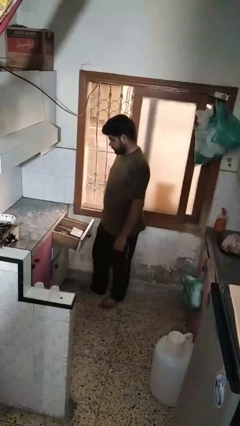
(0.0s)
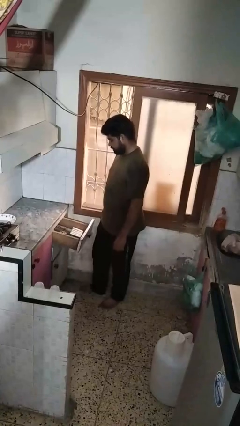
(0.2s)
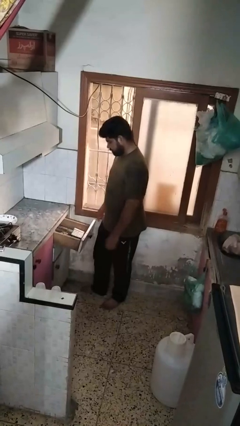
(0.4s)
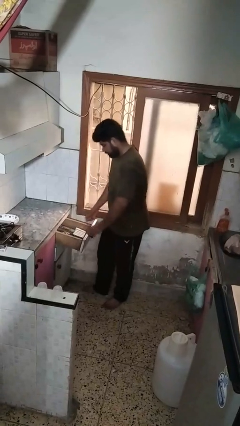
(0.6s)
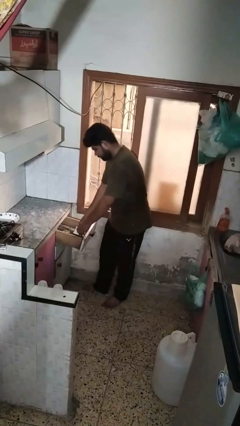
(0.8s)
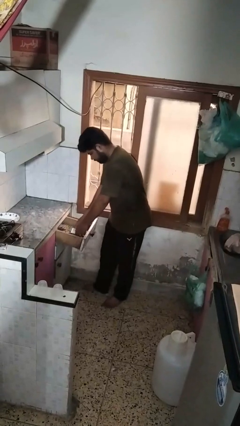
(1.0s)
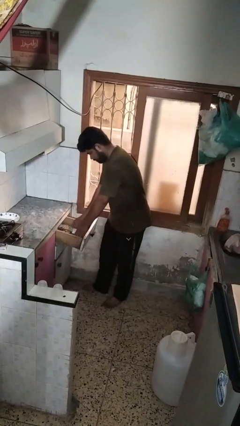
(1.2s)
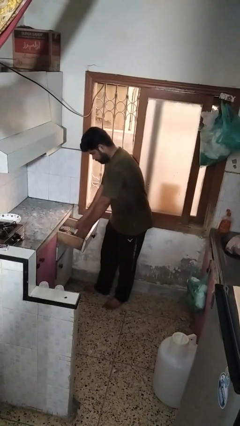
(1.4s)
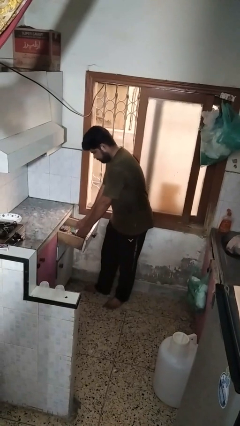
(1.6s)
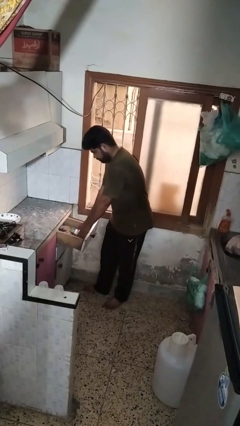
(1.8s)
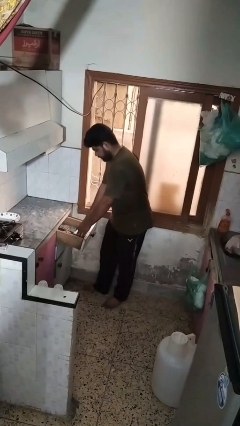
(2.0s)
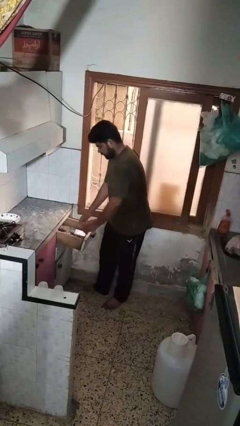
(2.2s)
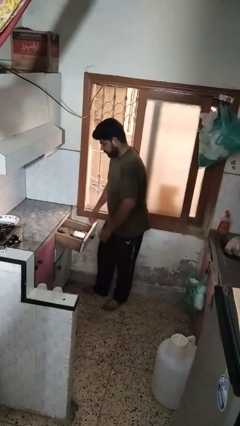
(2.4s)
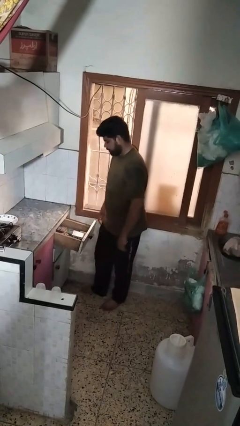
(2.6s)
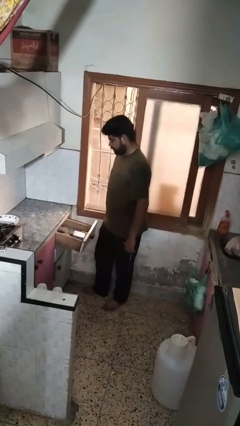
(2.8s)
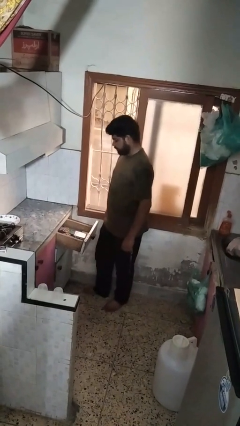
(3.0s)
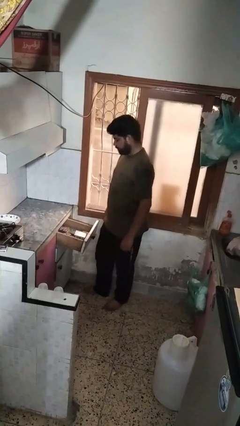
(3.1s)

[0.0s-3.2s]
person searches in kitchen drawer

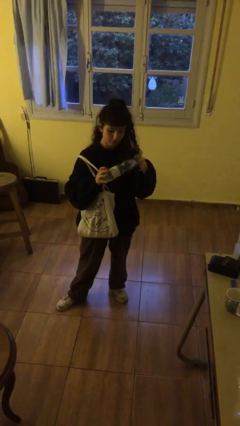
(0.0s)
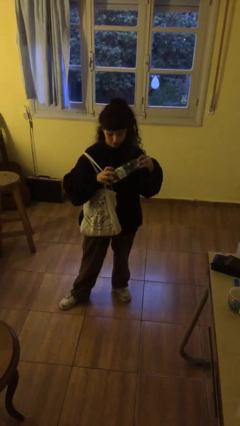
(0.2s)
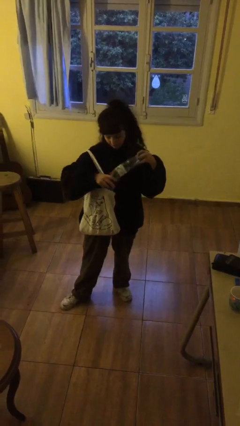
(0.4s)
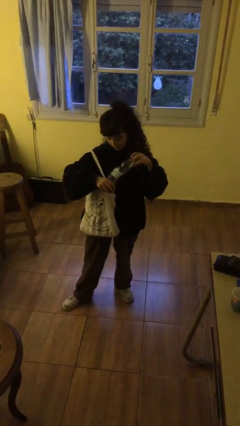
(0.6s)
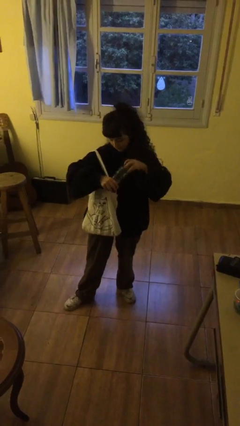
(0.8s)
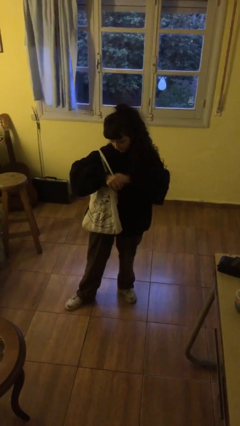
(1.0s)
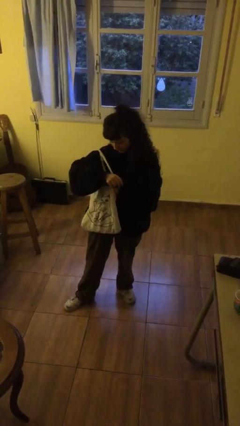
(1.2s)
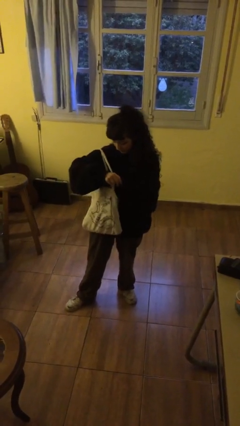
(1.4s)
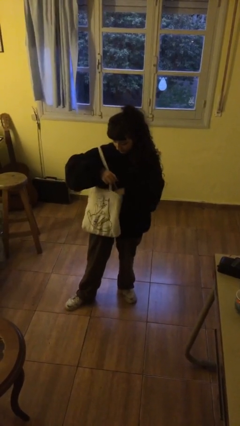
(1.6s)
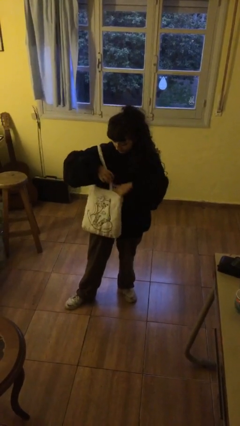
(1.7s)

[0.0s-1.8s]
person puts object into purse

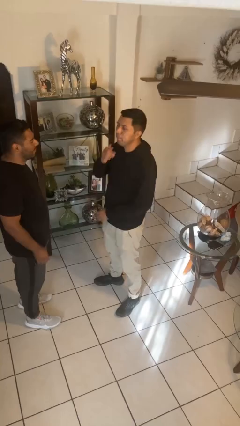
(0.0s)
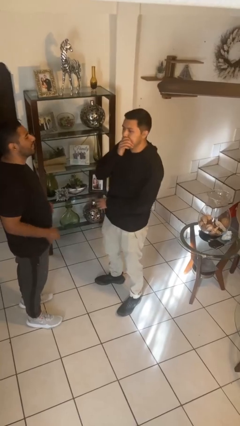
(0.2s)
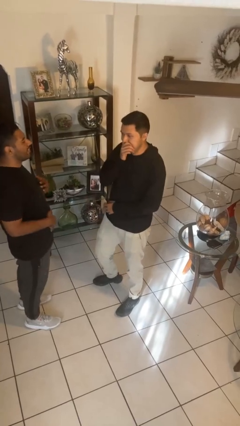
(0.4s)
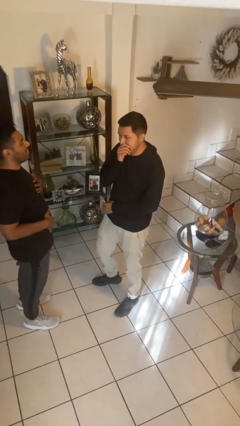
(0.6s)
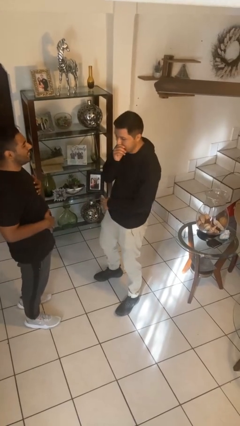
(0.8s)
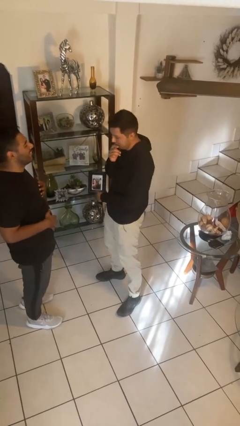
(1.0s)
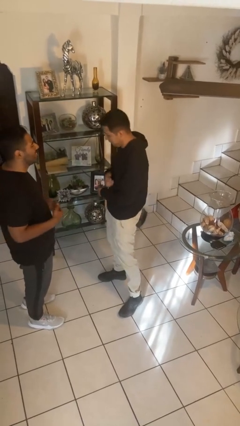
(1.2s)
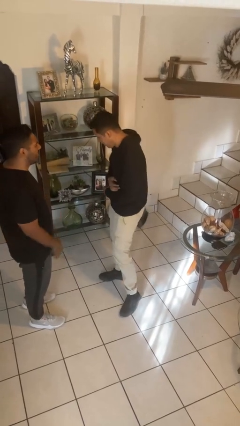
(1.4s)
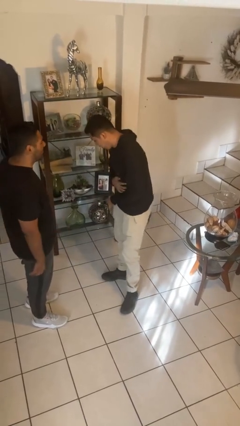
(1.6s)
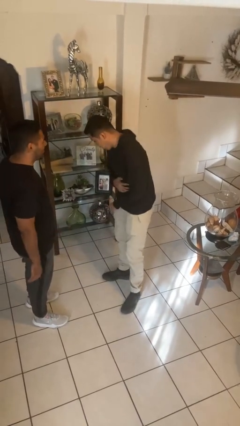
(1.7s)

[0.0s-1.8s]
person laughs with person

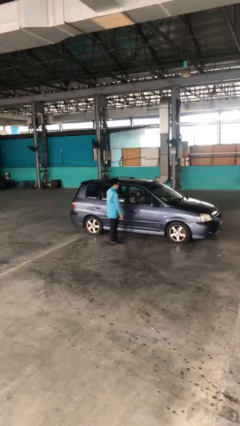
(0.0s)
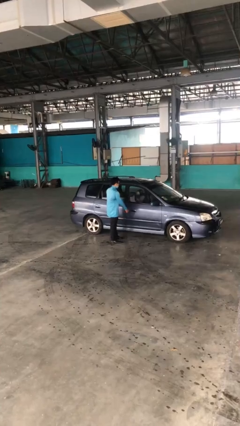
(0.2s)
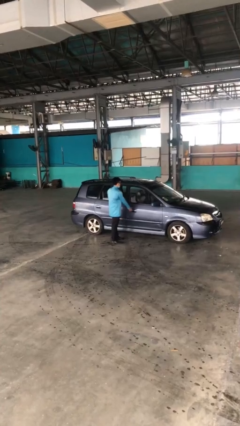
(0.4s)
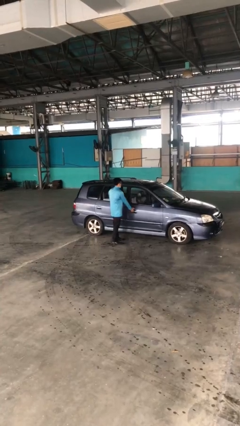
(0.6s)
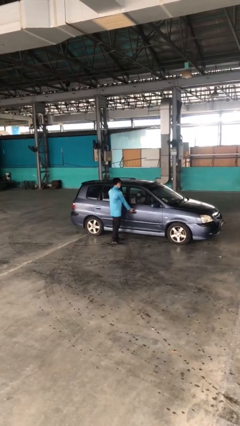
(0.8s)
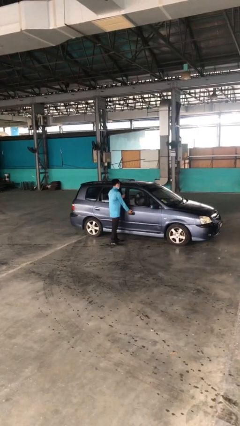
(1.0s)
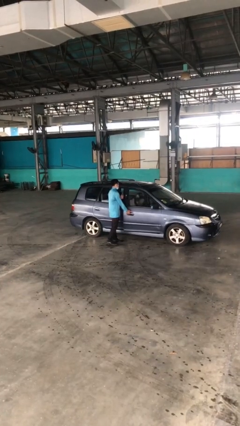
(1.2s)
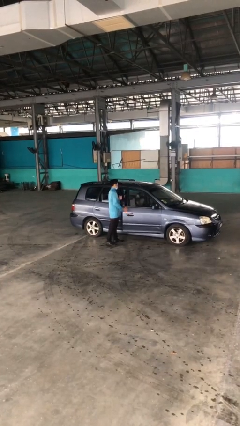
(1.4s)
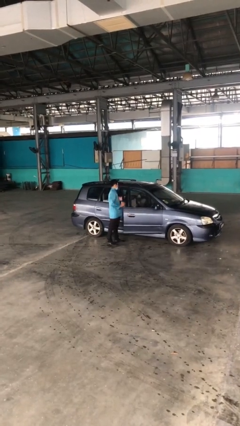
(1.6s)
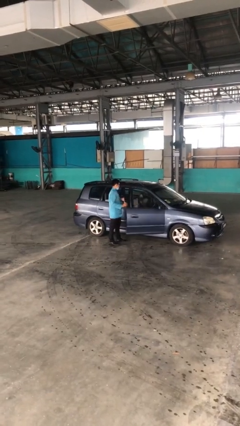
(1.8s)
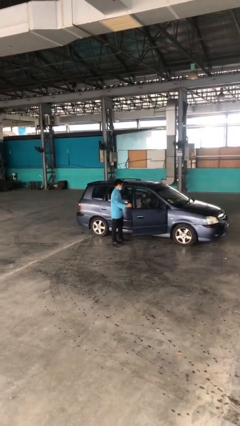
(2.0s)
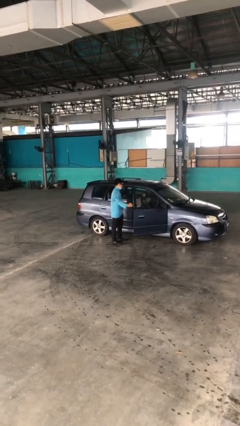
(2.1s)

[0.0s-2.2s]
person opens car door

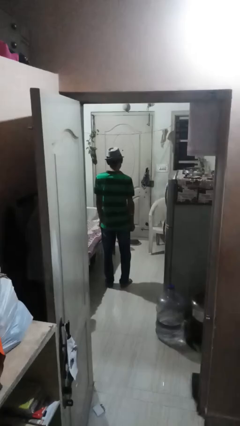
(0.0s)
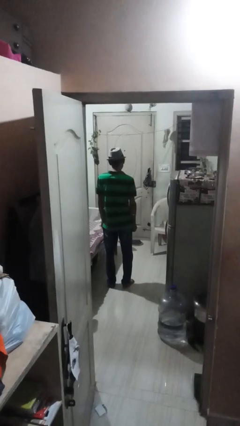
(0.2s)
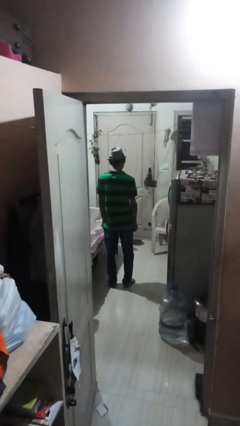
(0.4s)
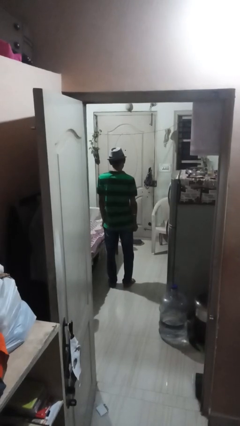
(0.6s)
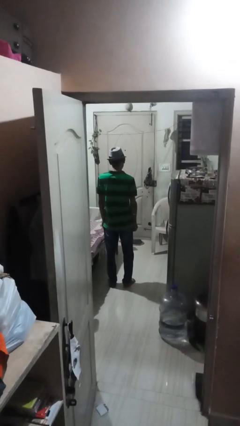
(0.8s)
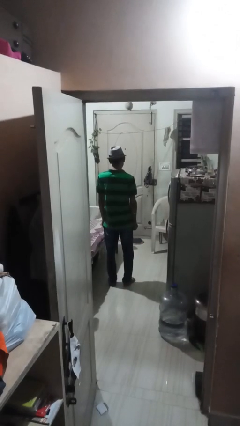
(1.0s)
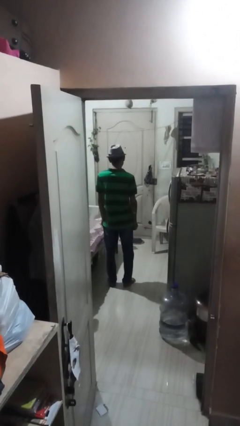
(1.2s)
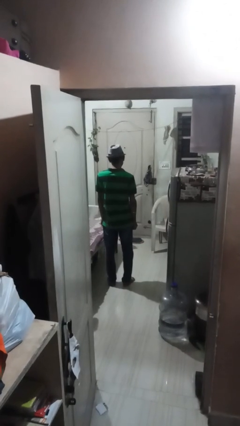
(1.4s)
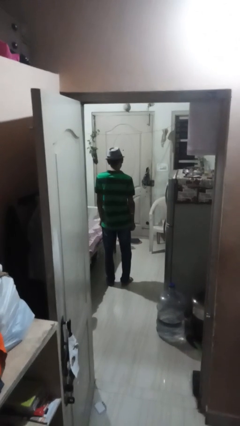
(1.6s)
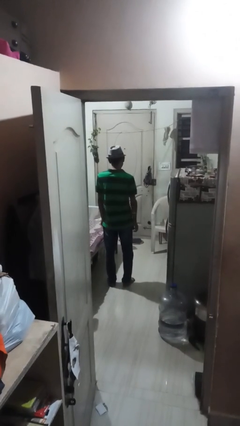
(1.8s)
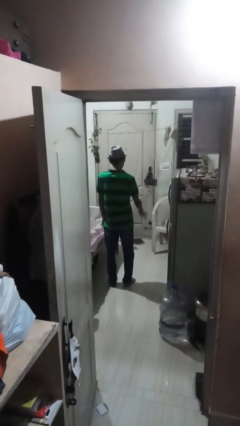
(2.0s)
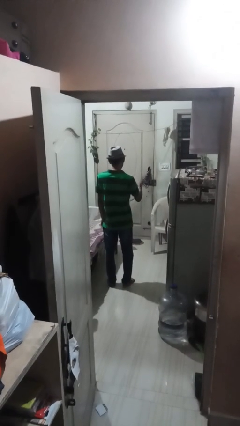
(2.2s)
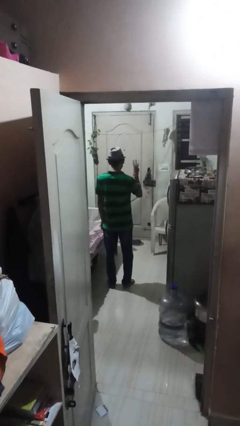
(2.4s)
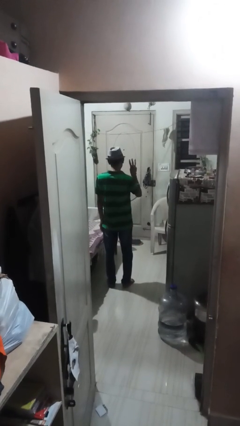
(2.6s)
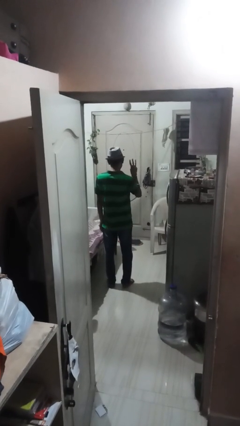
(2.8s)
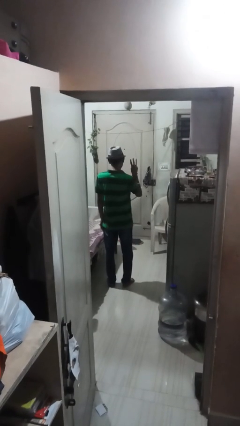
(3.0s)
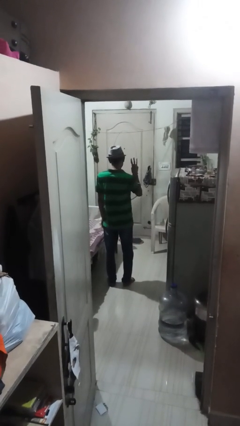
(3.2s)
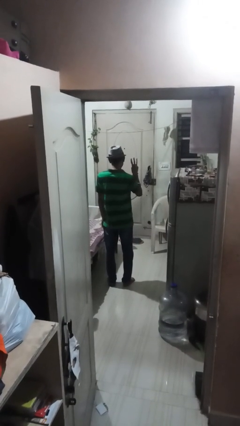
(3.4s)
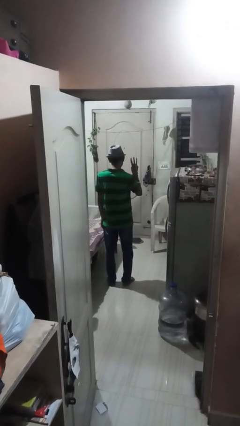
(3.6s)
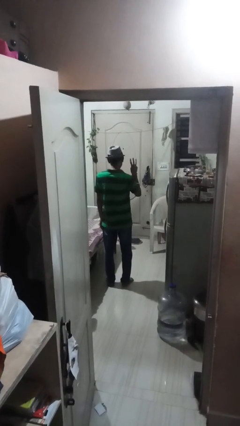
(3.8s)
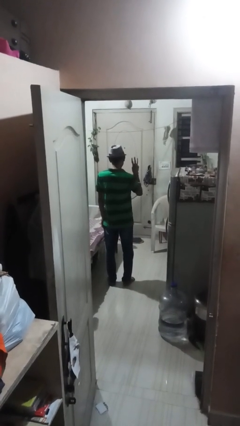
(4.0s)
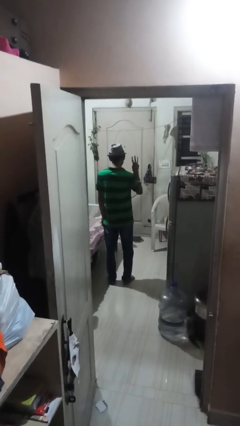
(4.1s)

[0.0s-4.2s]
person gestures number three

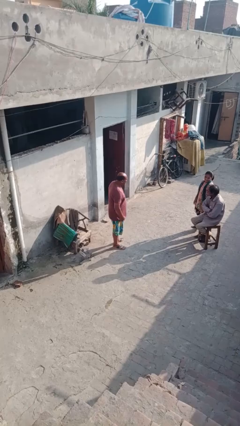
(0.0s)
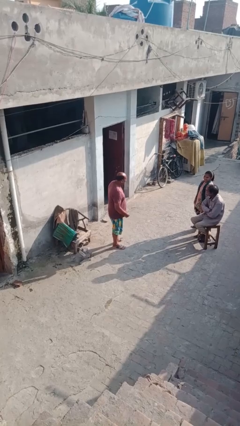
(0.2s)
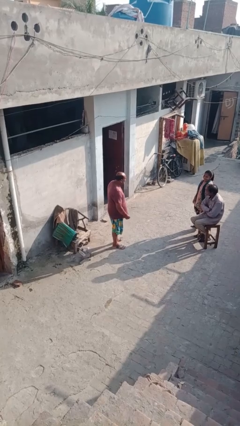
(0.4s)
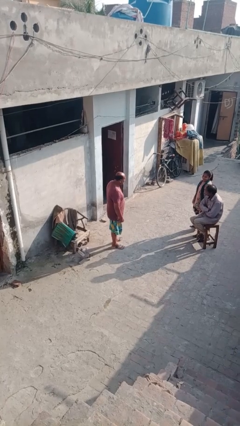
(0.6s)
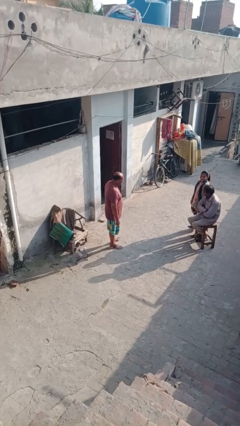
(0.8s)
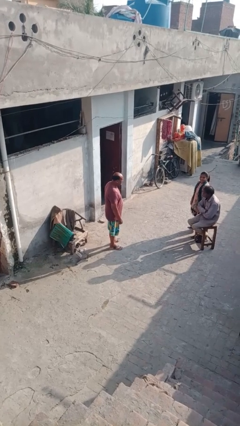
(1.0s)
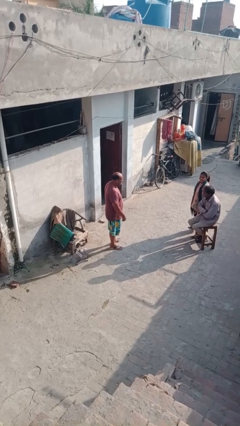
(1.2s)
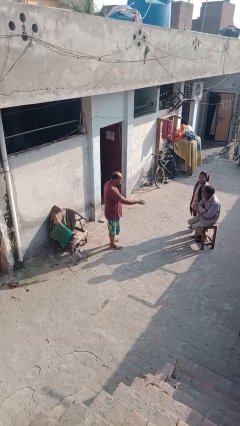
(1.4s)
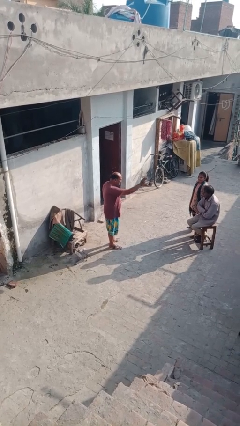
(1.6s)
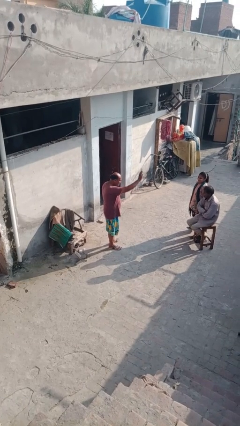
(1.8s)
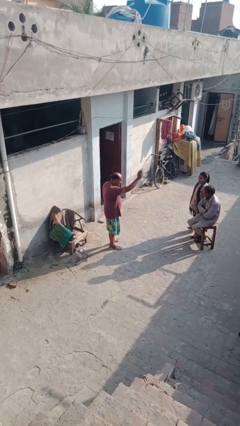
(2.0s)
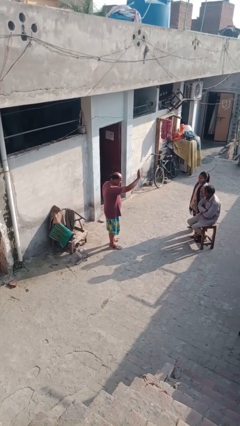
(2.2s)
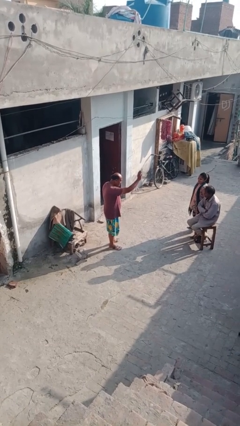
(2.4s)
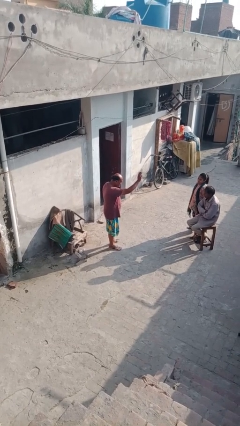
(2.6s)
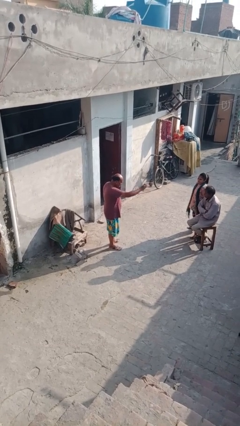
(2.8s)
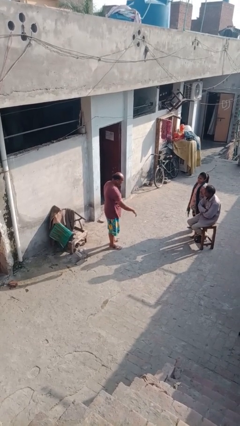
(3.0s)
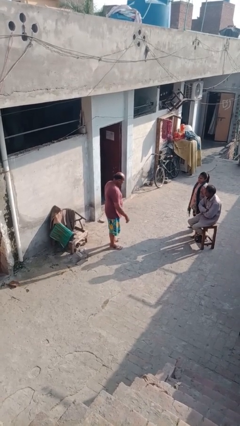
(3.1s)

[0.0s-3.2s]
person waves at person

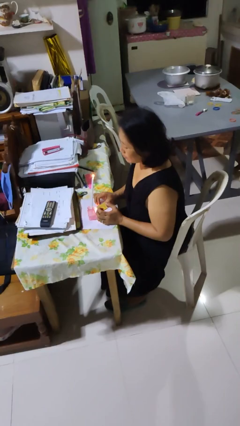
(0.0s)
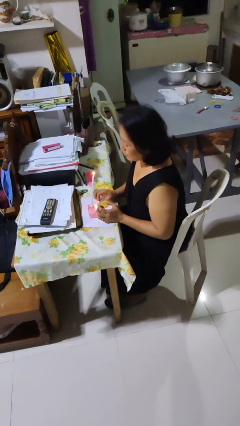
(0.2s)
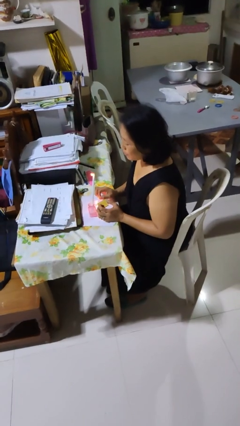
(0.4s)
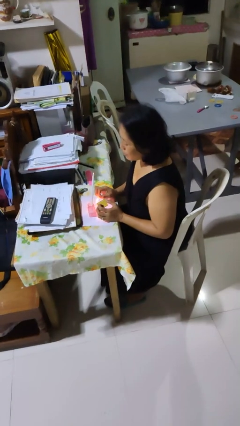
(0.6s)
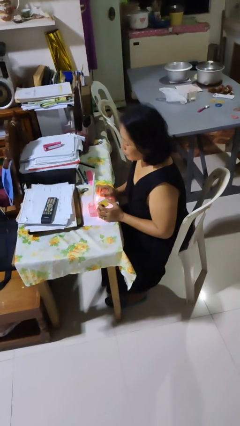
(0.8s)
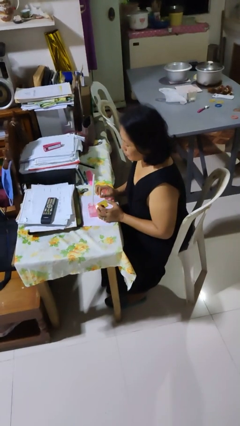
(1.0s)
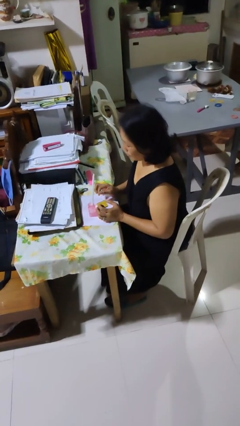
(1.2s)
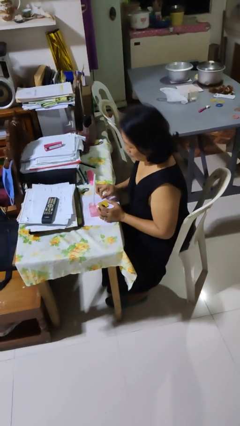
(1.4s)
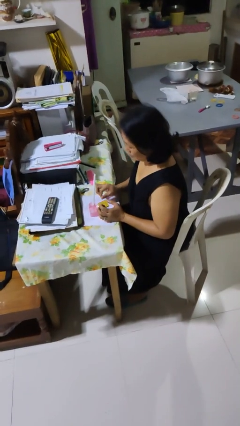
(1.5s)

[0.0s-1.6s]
person extinguishes candle
